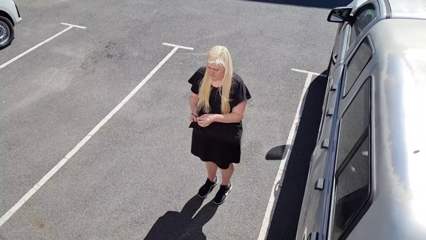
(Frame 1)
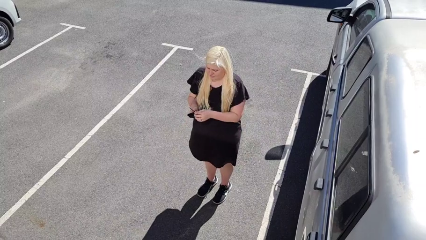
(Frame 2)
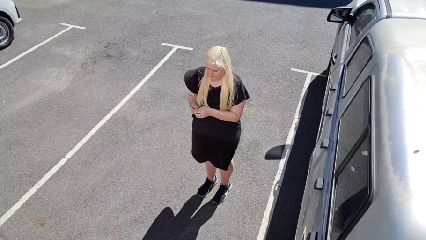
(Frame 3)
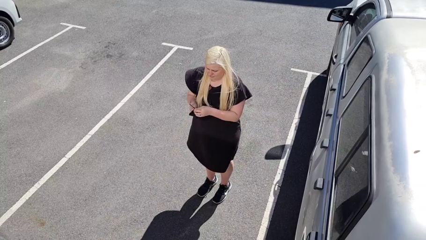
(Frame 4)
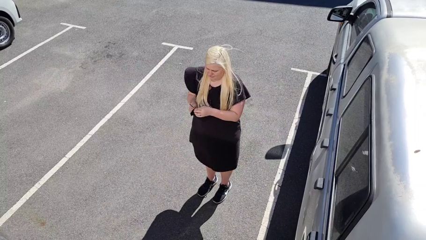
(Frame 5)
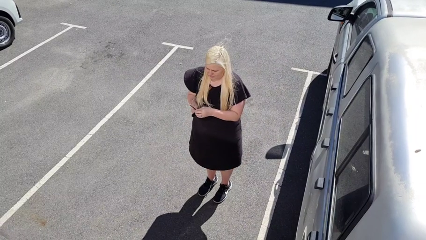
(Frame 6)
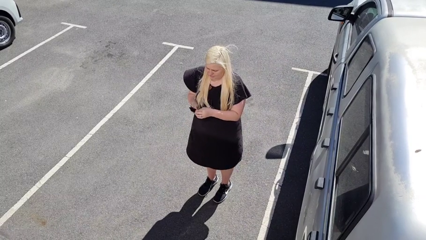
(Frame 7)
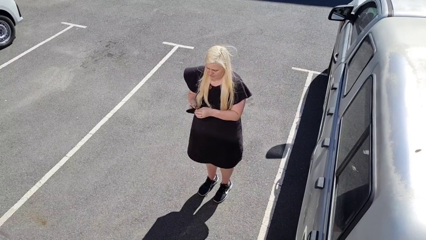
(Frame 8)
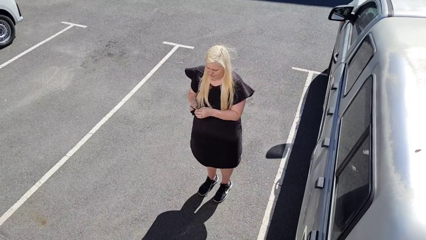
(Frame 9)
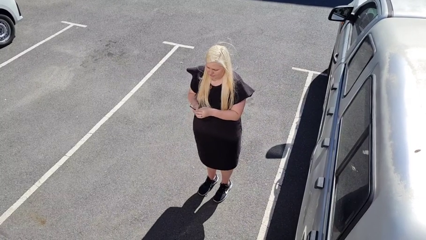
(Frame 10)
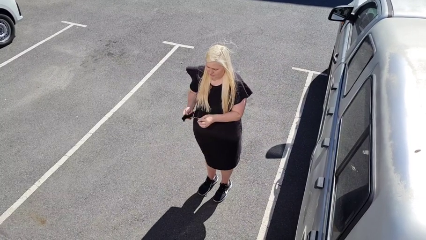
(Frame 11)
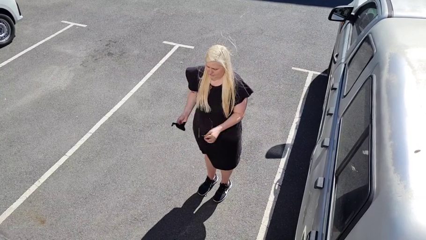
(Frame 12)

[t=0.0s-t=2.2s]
person cleans eyeglasses

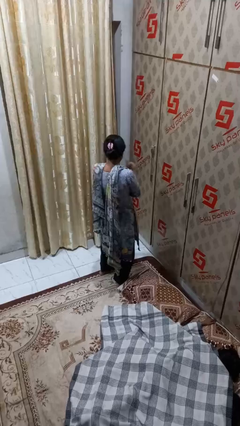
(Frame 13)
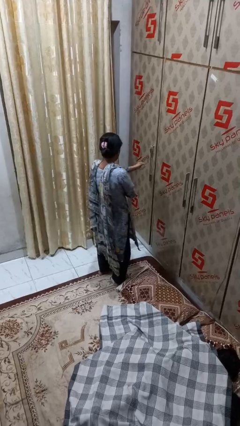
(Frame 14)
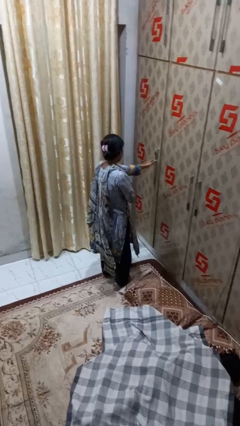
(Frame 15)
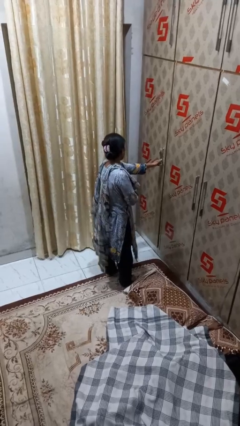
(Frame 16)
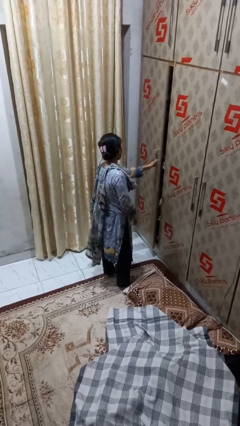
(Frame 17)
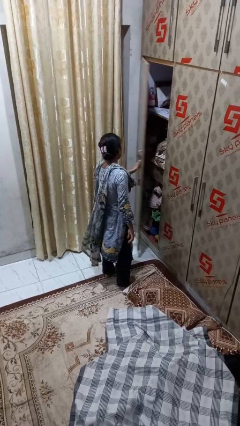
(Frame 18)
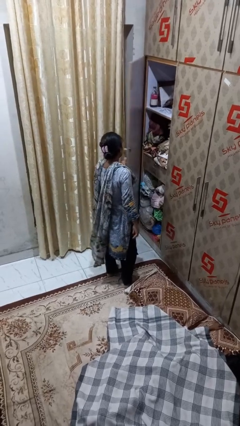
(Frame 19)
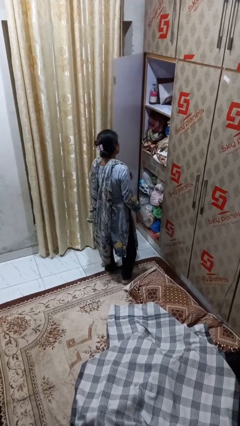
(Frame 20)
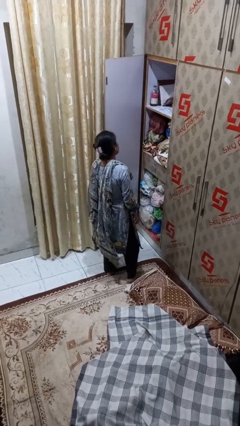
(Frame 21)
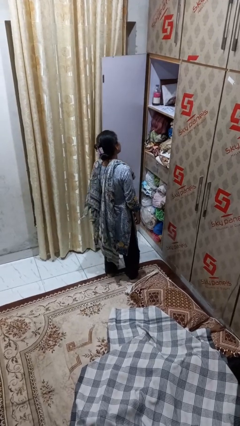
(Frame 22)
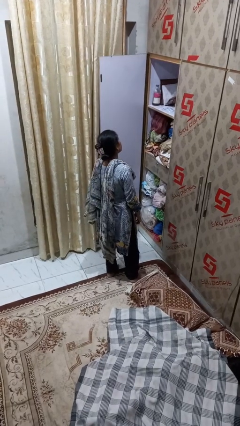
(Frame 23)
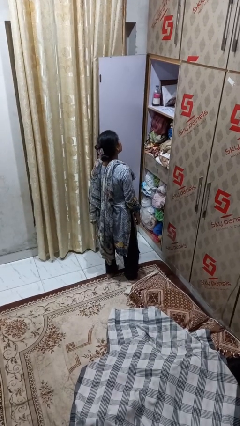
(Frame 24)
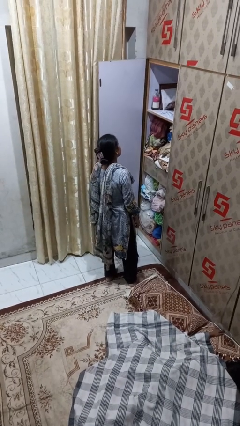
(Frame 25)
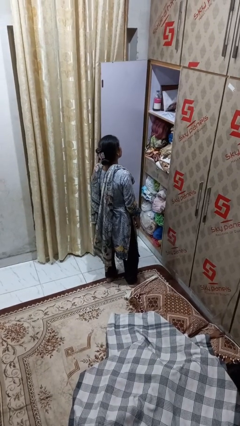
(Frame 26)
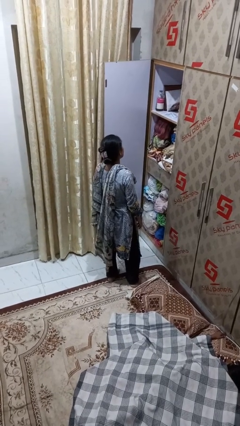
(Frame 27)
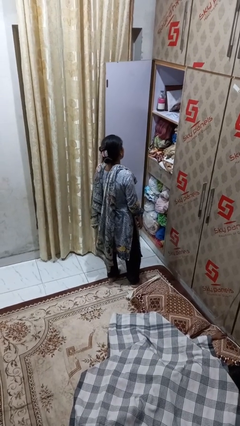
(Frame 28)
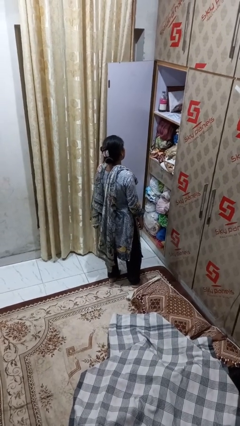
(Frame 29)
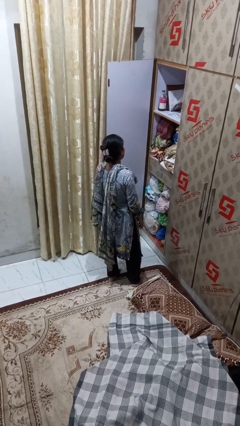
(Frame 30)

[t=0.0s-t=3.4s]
person opens closet door

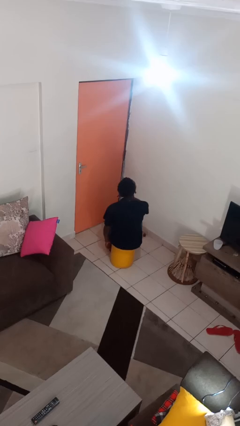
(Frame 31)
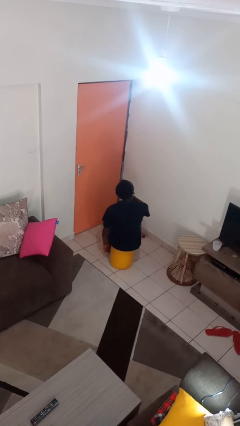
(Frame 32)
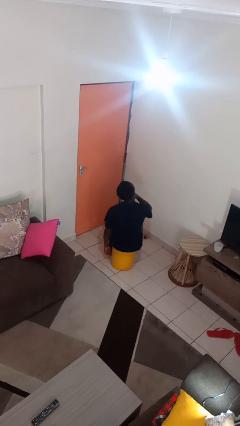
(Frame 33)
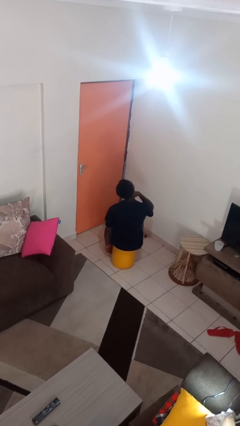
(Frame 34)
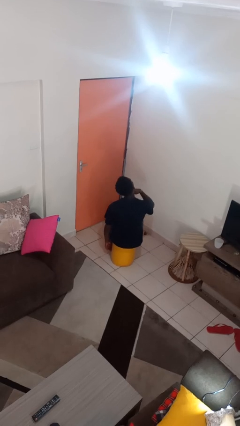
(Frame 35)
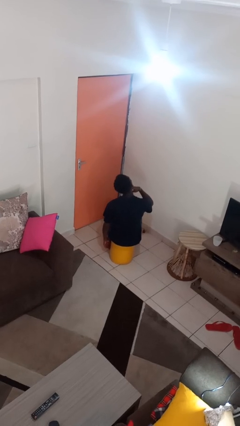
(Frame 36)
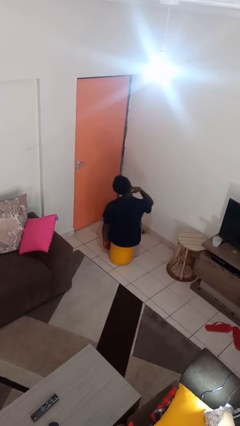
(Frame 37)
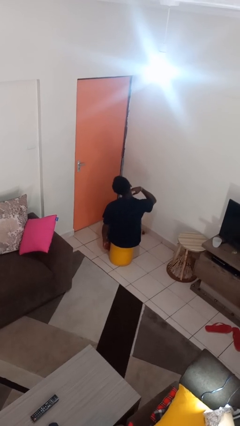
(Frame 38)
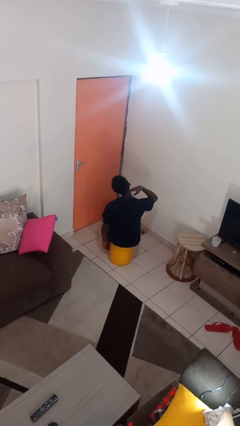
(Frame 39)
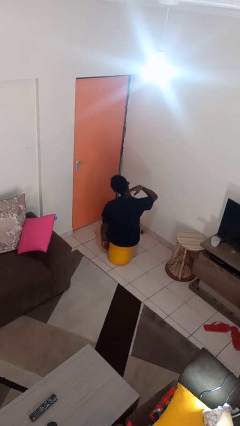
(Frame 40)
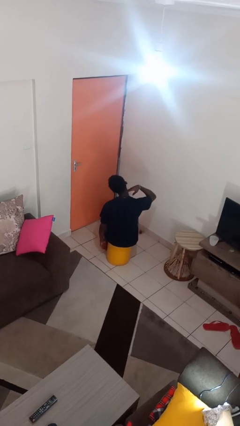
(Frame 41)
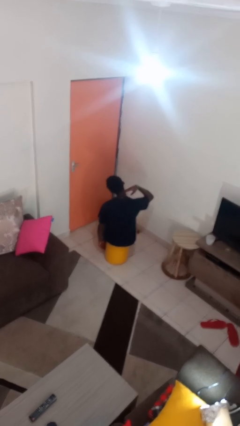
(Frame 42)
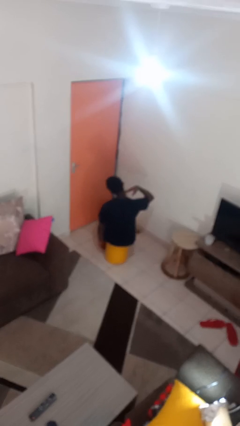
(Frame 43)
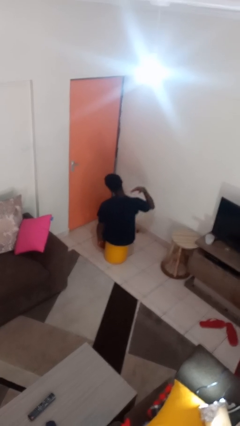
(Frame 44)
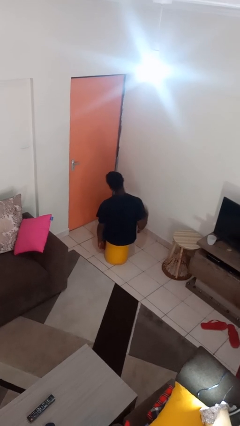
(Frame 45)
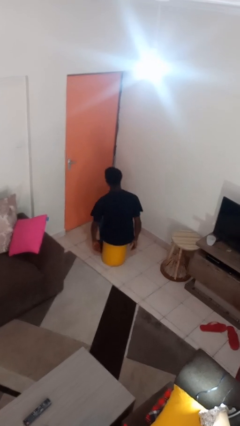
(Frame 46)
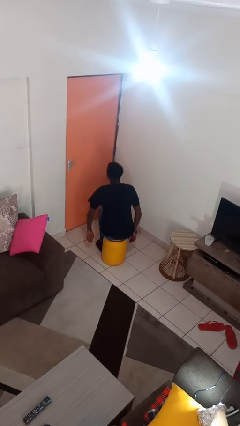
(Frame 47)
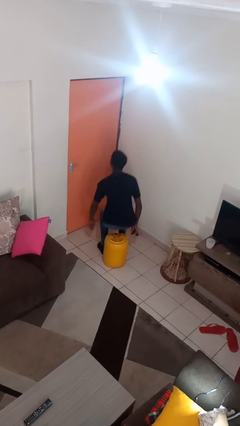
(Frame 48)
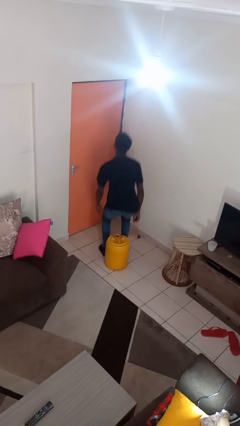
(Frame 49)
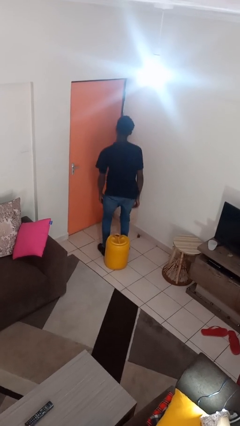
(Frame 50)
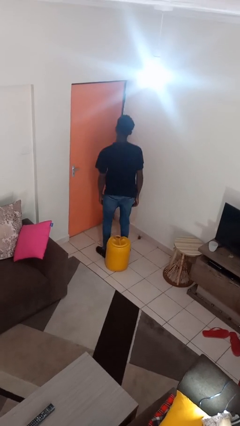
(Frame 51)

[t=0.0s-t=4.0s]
person gestures cut

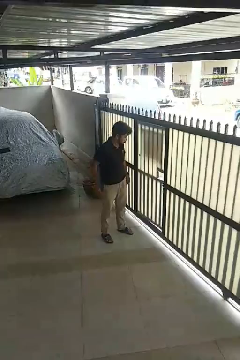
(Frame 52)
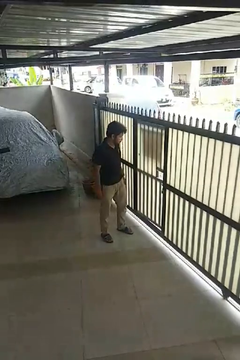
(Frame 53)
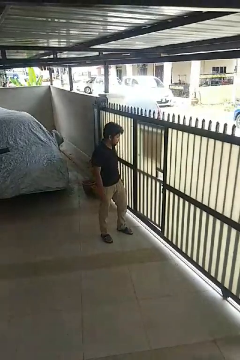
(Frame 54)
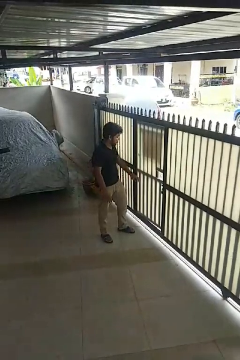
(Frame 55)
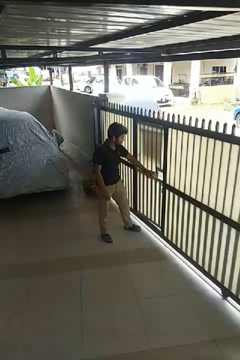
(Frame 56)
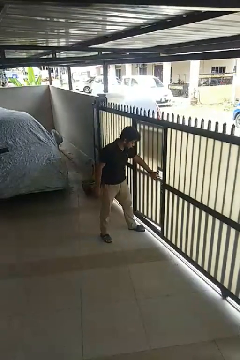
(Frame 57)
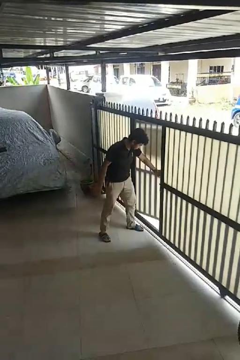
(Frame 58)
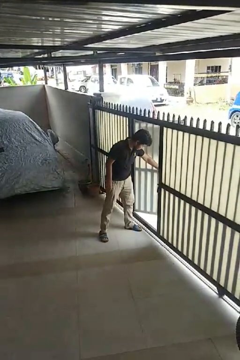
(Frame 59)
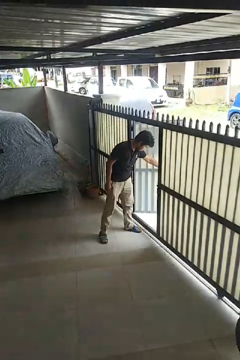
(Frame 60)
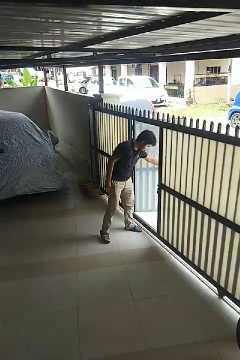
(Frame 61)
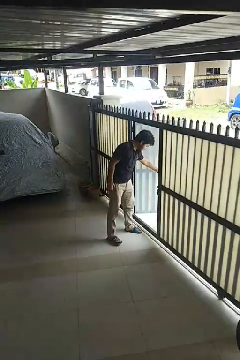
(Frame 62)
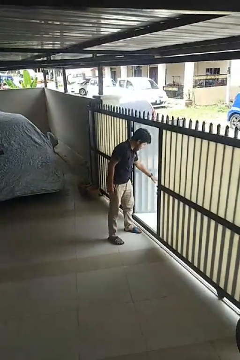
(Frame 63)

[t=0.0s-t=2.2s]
person opens gate

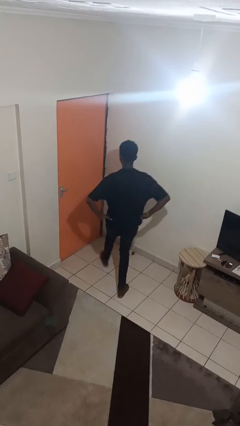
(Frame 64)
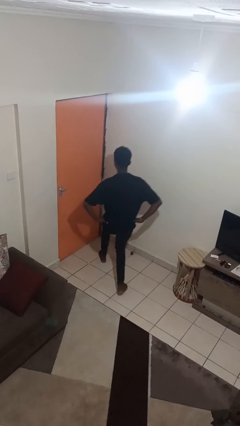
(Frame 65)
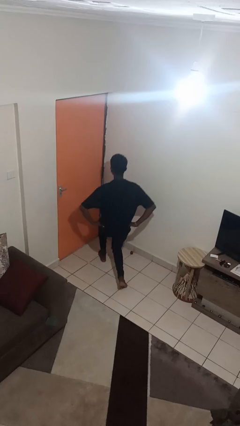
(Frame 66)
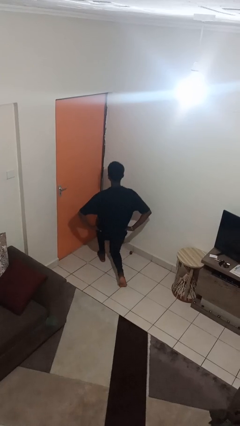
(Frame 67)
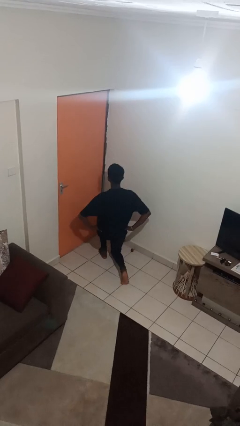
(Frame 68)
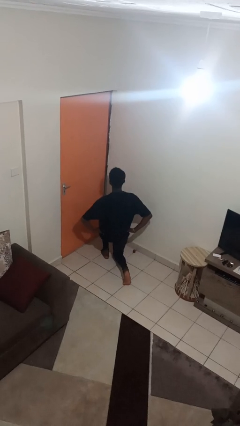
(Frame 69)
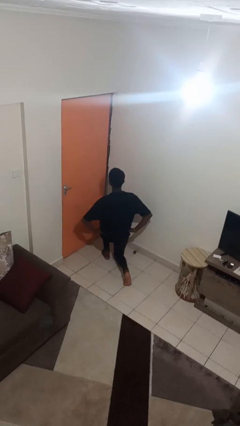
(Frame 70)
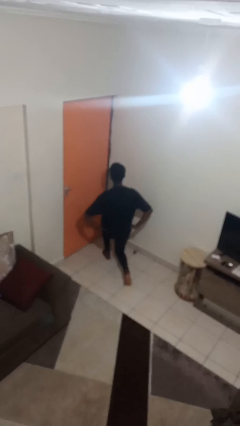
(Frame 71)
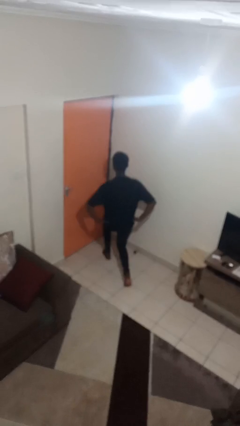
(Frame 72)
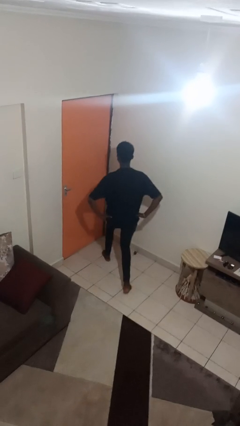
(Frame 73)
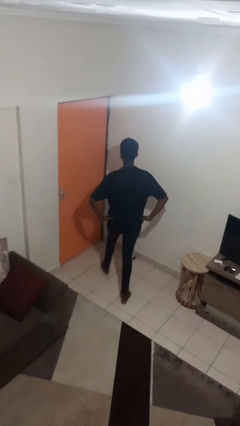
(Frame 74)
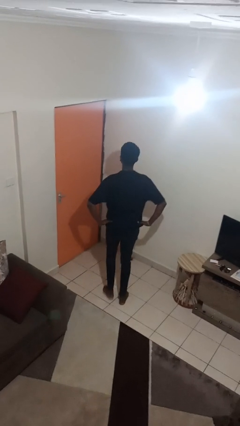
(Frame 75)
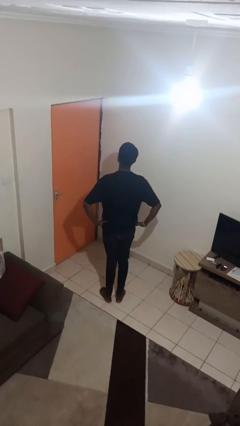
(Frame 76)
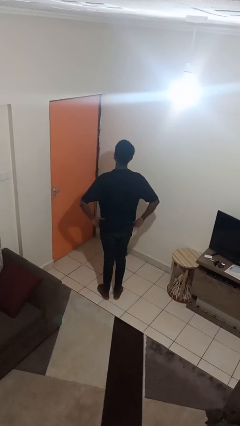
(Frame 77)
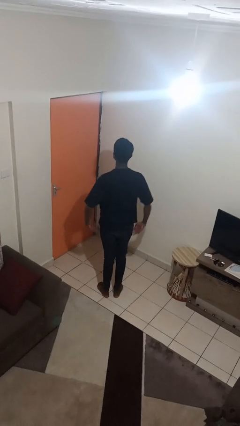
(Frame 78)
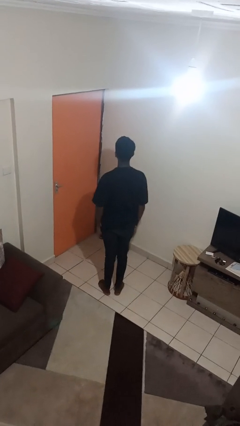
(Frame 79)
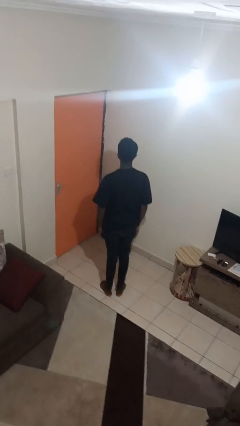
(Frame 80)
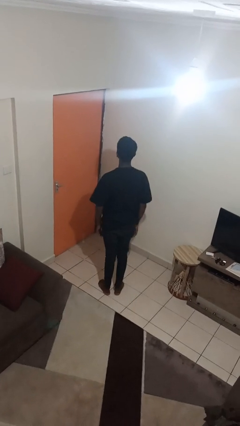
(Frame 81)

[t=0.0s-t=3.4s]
person exercises with lunges

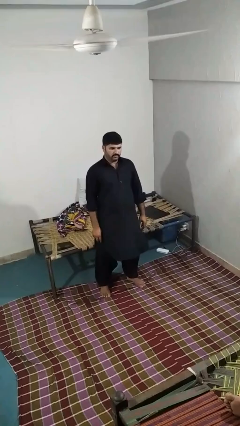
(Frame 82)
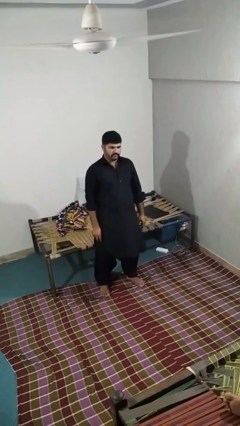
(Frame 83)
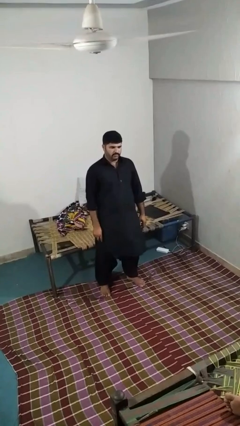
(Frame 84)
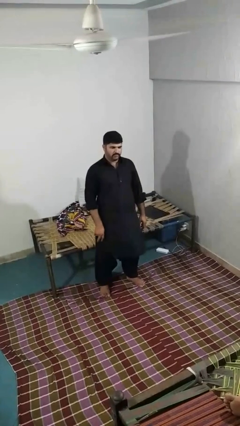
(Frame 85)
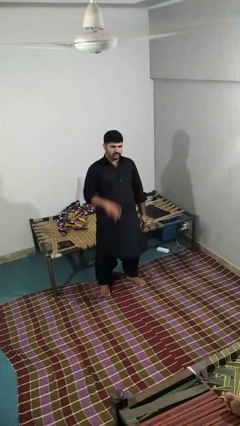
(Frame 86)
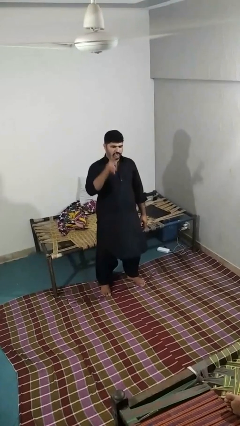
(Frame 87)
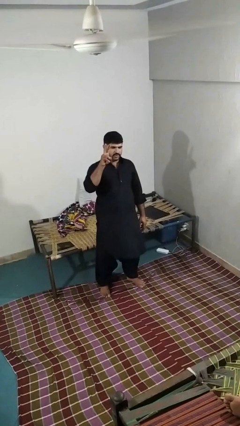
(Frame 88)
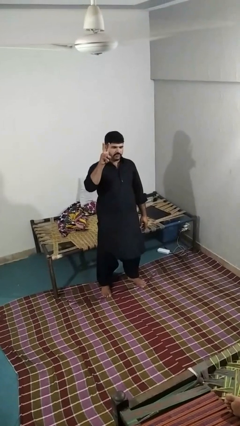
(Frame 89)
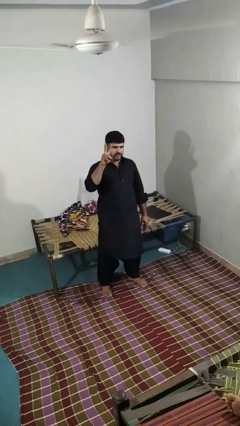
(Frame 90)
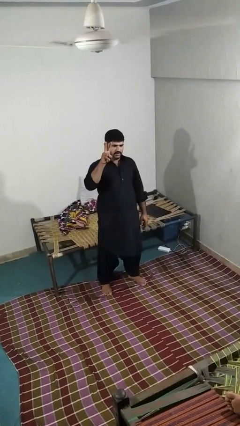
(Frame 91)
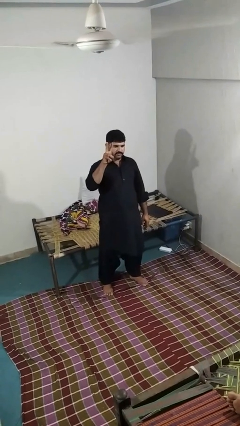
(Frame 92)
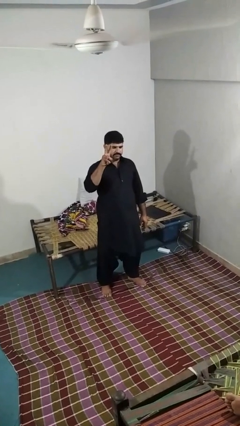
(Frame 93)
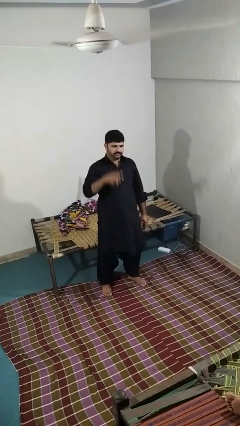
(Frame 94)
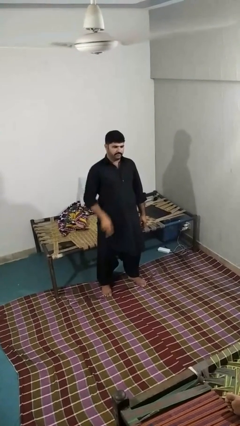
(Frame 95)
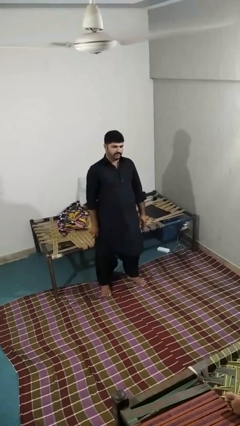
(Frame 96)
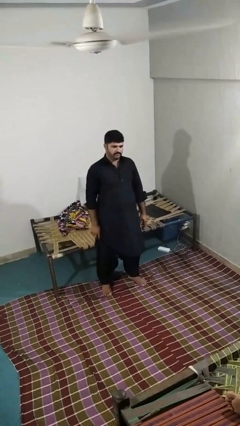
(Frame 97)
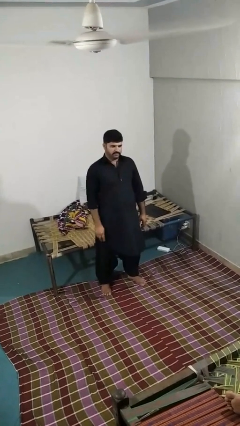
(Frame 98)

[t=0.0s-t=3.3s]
person gestures peace
